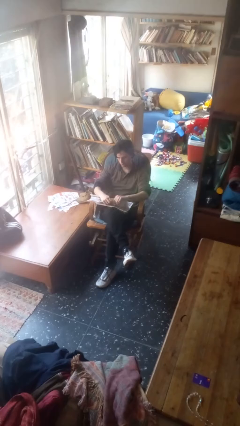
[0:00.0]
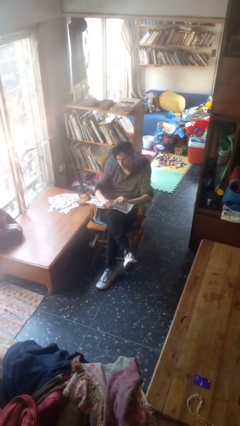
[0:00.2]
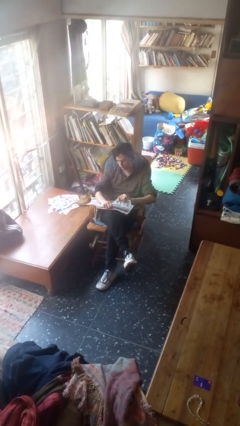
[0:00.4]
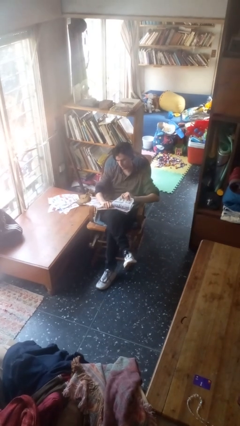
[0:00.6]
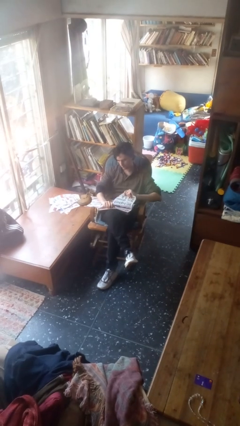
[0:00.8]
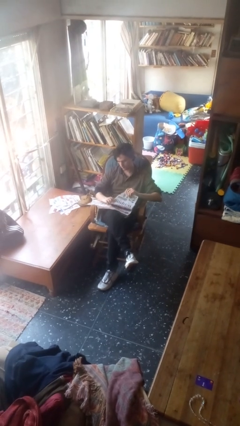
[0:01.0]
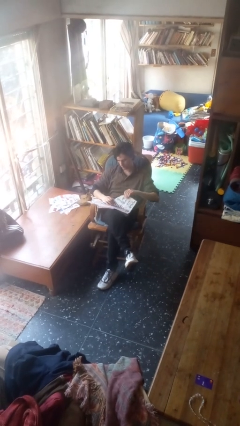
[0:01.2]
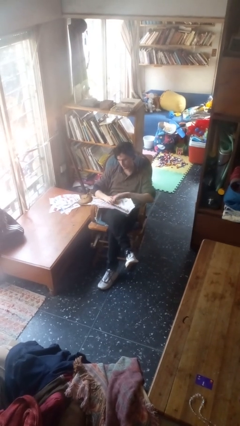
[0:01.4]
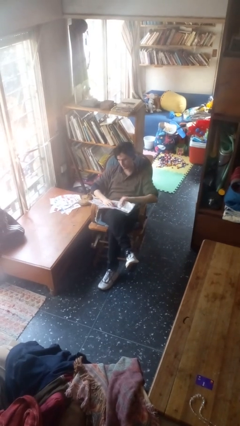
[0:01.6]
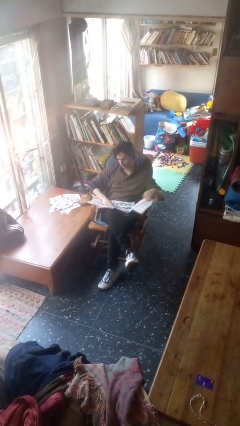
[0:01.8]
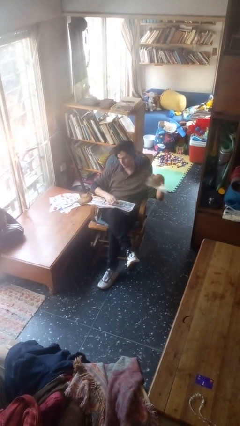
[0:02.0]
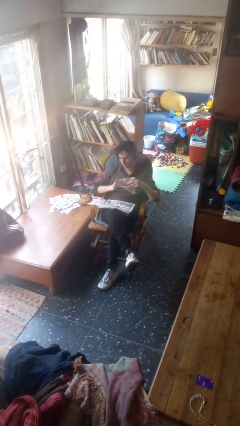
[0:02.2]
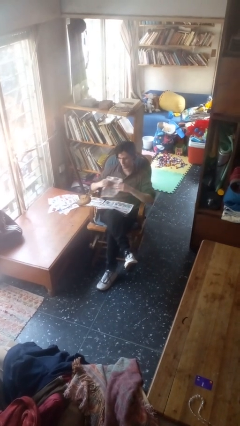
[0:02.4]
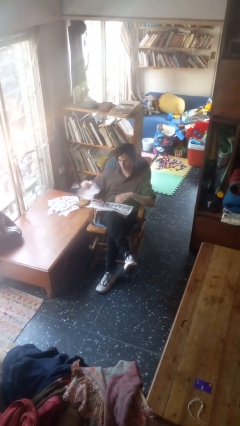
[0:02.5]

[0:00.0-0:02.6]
person tears paper

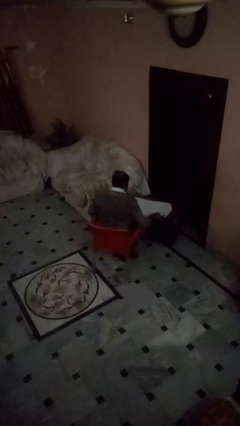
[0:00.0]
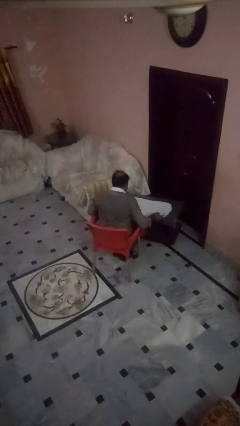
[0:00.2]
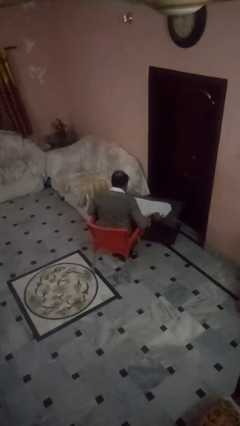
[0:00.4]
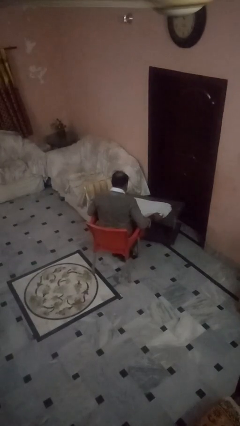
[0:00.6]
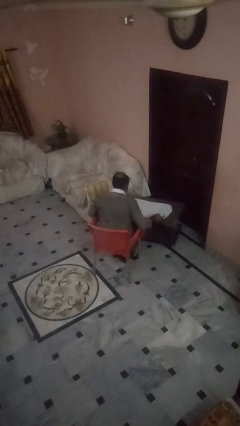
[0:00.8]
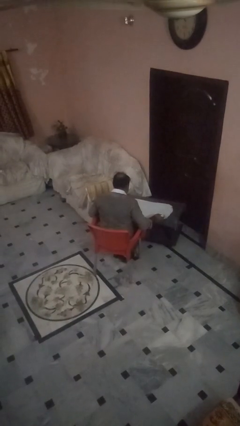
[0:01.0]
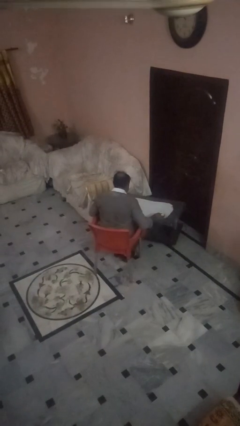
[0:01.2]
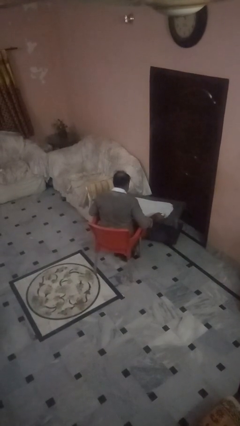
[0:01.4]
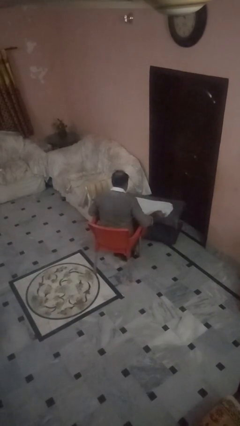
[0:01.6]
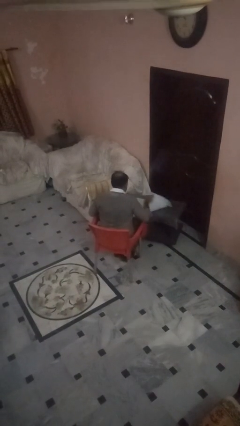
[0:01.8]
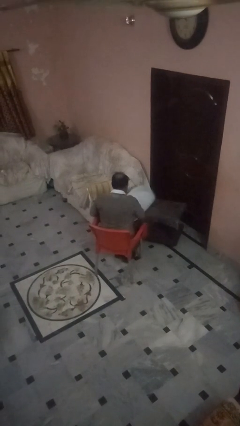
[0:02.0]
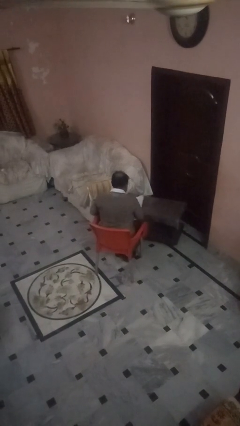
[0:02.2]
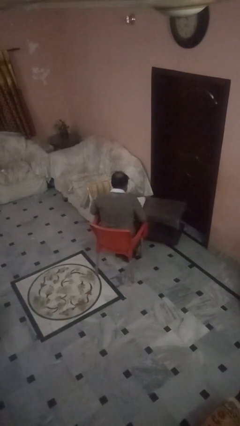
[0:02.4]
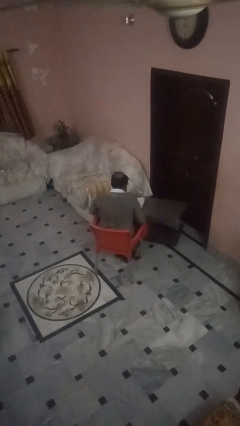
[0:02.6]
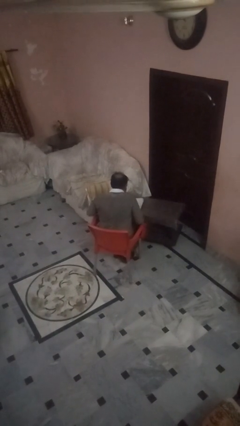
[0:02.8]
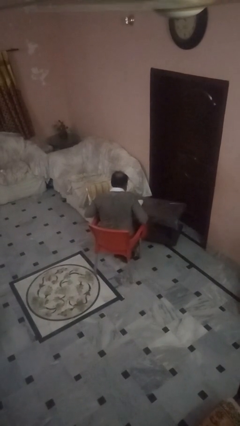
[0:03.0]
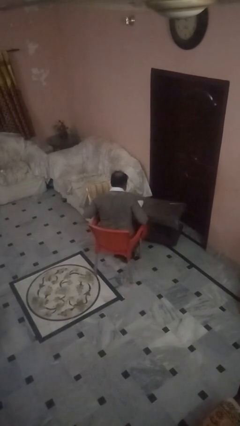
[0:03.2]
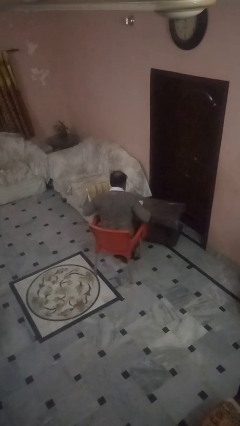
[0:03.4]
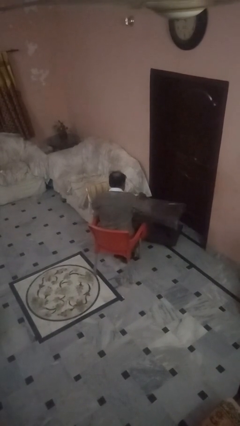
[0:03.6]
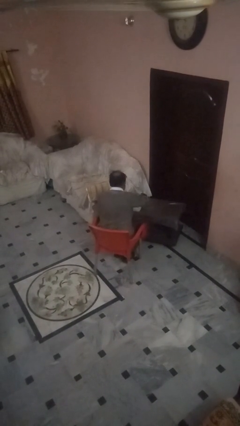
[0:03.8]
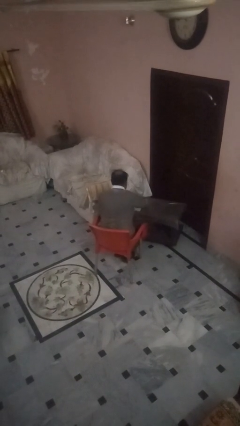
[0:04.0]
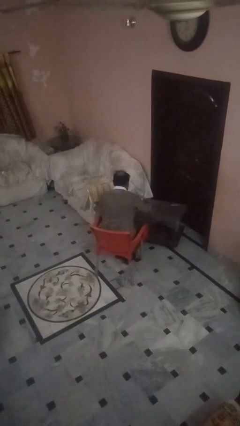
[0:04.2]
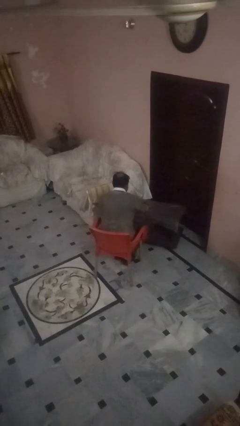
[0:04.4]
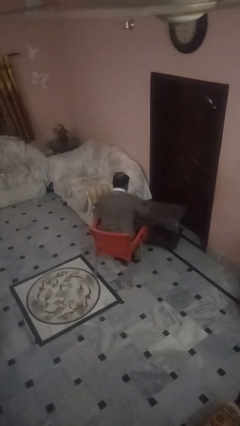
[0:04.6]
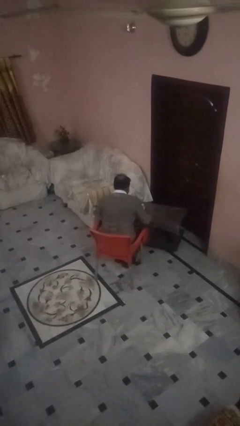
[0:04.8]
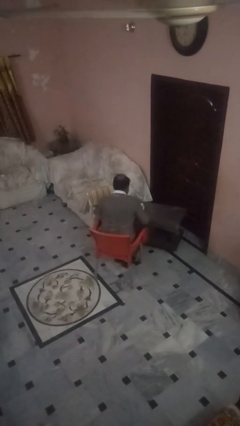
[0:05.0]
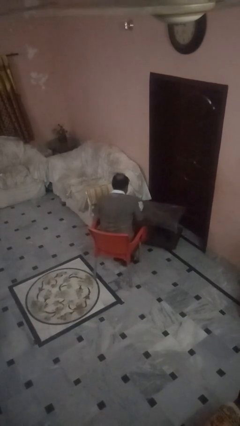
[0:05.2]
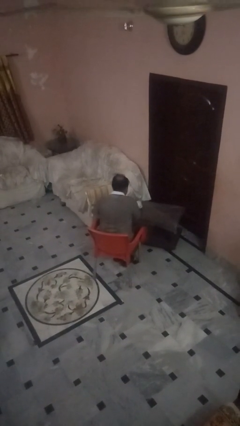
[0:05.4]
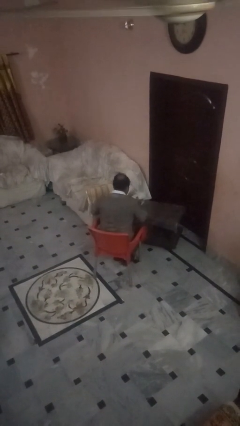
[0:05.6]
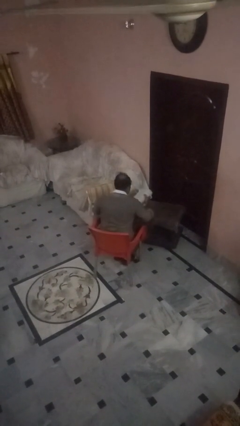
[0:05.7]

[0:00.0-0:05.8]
person folds towel

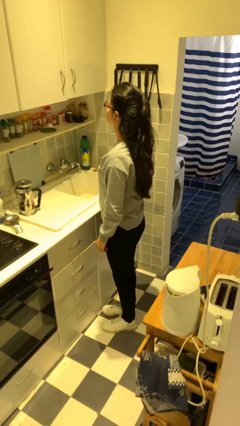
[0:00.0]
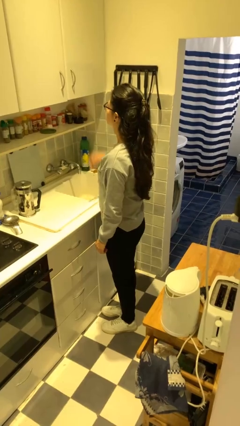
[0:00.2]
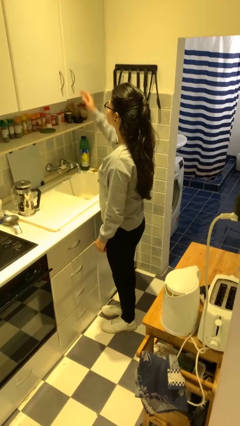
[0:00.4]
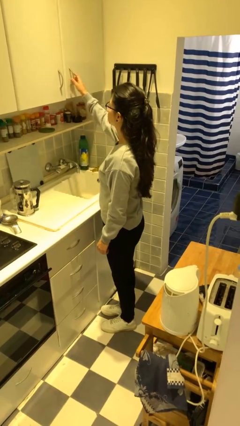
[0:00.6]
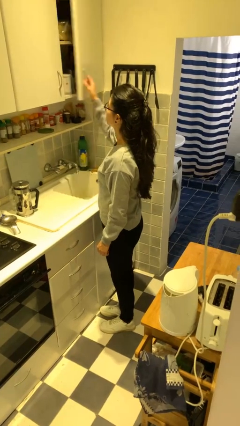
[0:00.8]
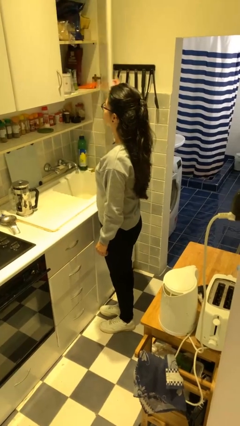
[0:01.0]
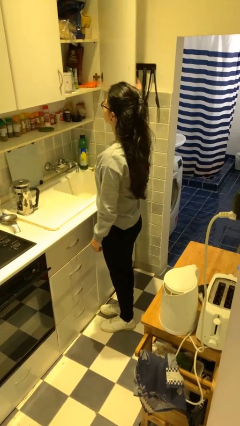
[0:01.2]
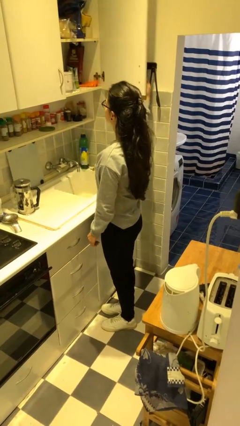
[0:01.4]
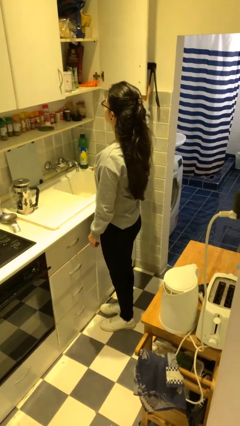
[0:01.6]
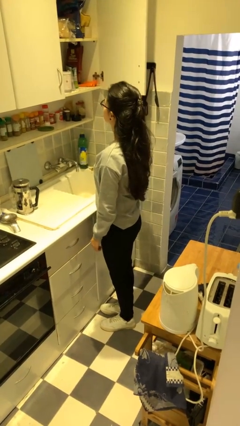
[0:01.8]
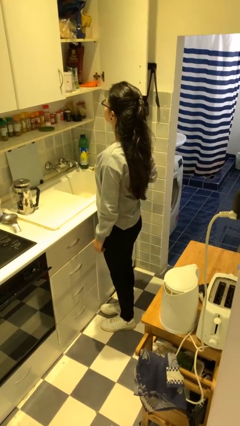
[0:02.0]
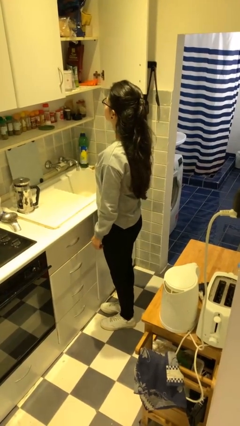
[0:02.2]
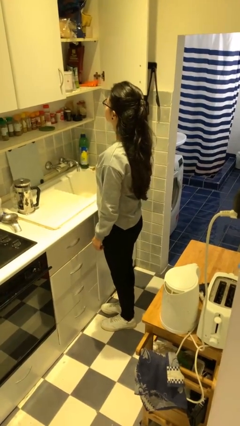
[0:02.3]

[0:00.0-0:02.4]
person opens cabinet

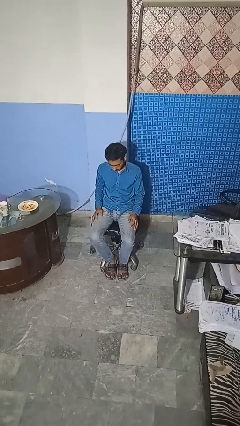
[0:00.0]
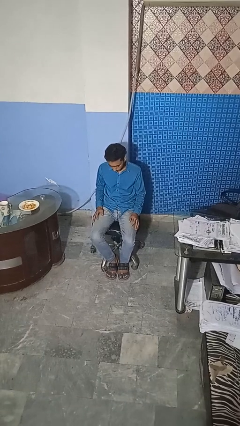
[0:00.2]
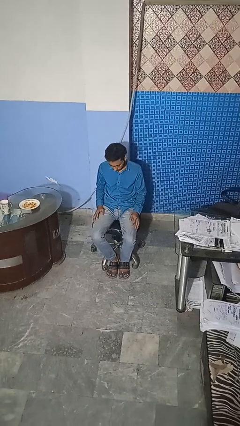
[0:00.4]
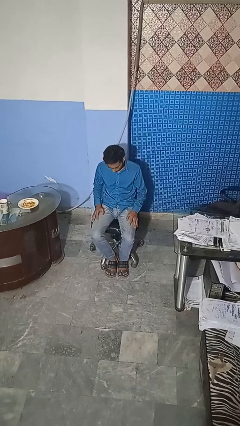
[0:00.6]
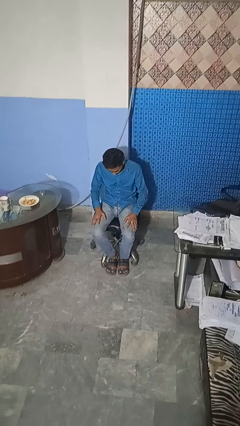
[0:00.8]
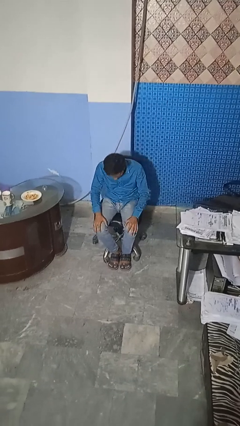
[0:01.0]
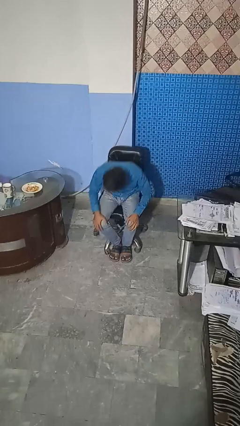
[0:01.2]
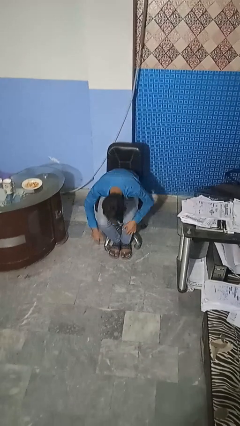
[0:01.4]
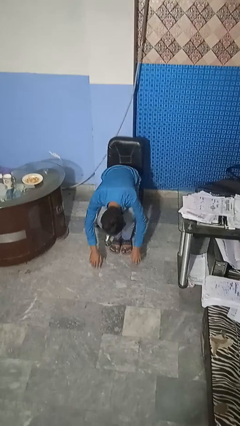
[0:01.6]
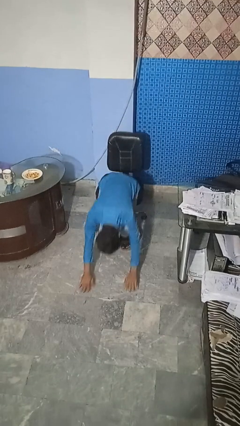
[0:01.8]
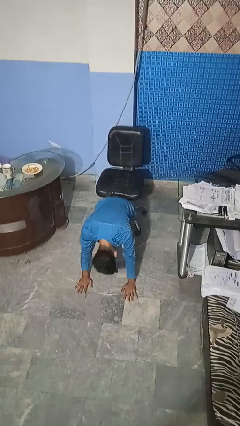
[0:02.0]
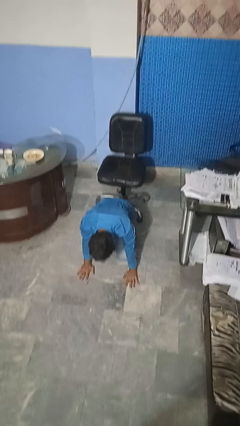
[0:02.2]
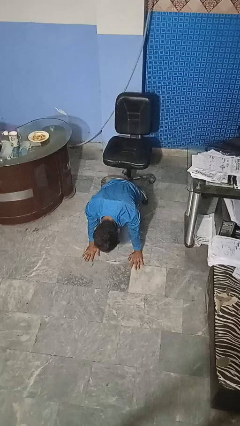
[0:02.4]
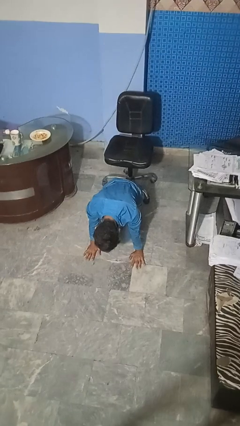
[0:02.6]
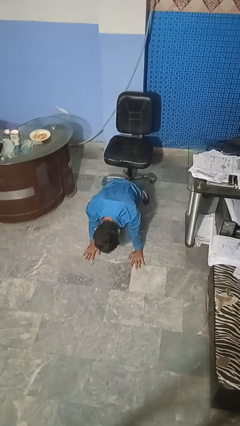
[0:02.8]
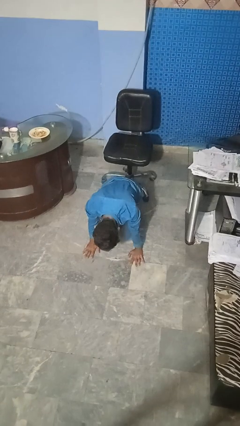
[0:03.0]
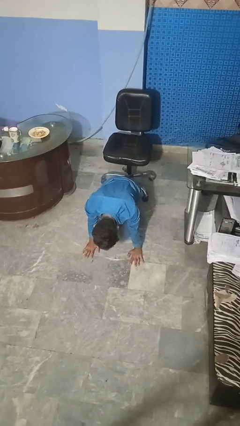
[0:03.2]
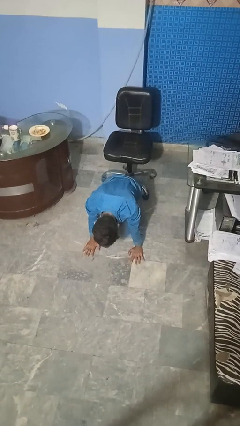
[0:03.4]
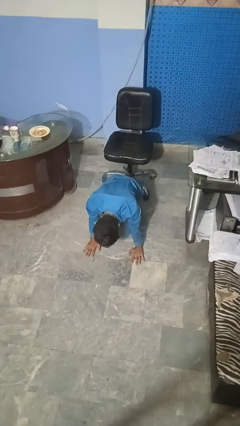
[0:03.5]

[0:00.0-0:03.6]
person falls from chair

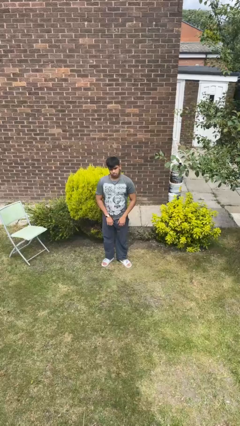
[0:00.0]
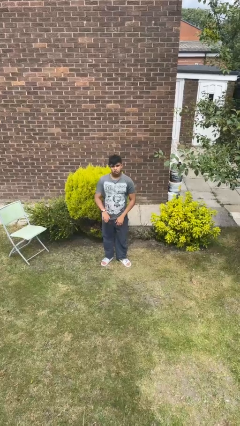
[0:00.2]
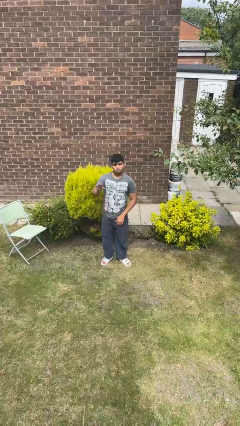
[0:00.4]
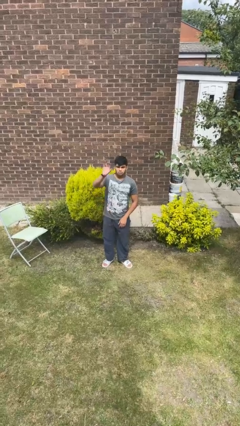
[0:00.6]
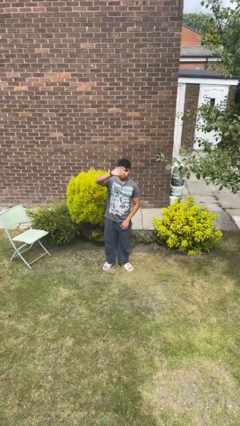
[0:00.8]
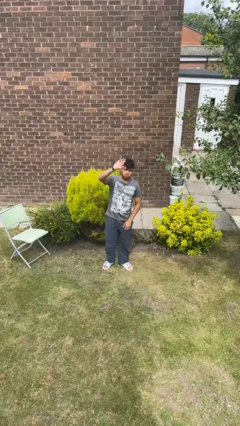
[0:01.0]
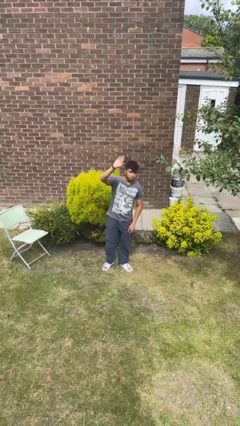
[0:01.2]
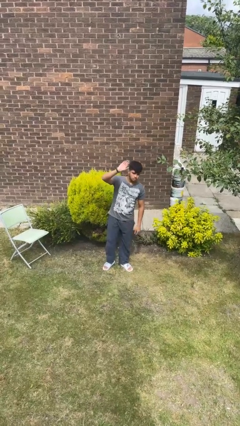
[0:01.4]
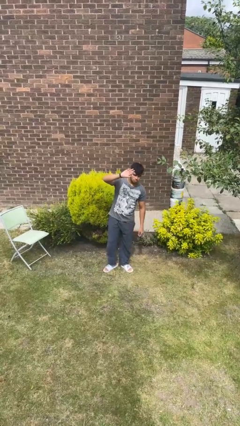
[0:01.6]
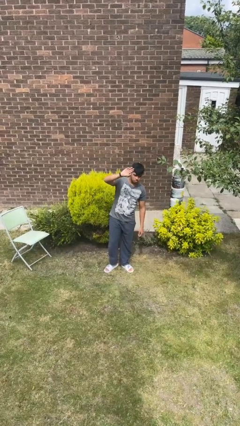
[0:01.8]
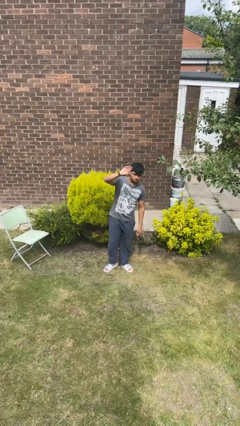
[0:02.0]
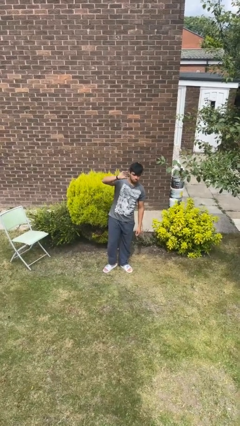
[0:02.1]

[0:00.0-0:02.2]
person gestures raise hand

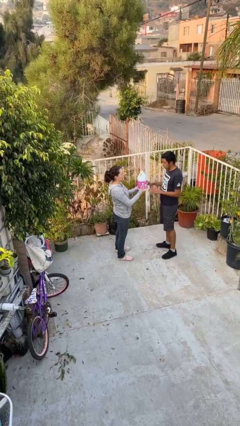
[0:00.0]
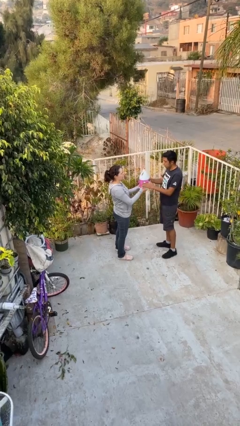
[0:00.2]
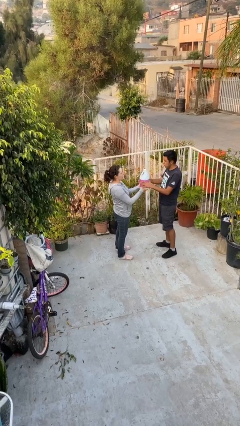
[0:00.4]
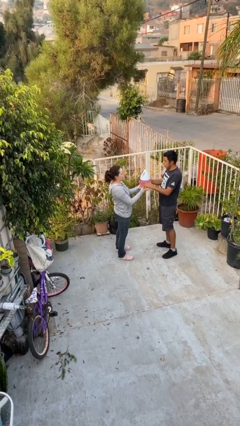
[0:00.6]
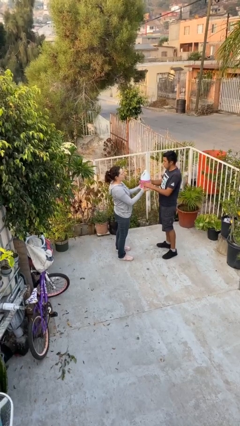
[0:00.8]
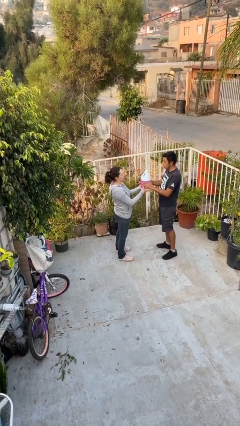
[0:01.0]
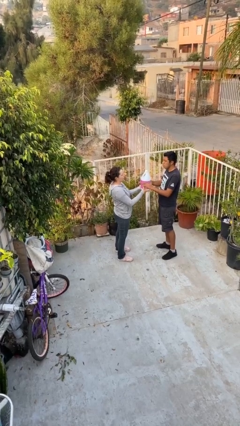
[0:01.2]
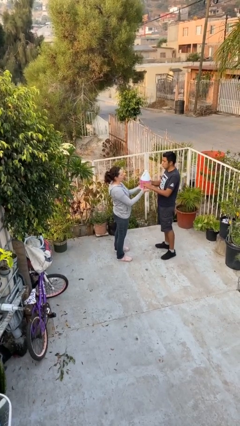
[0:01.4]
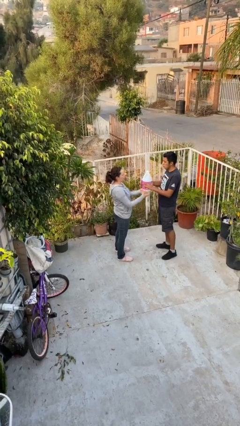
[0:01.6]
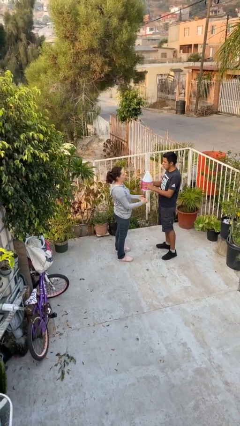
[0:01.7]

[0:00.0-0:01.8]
person transfers object to person
